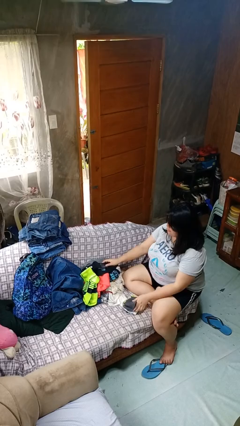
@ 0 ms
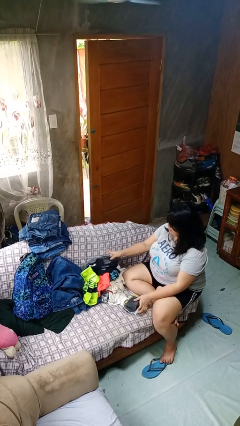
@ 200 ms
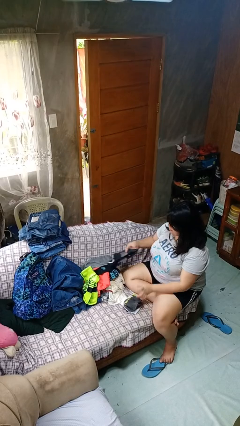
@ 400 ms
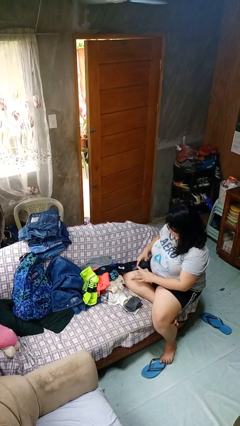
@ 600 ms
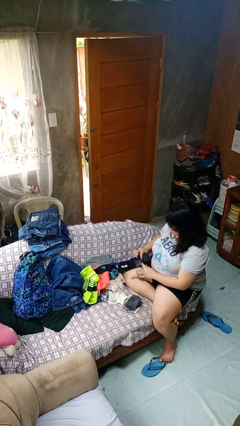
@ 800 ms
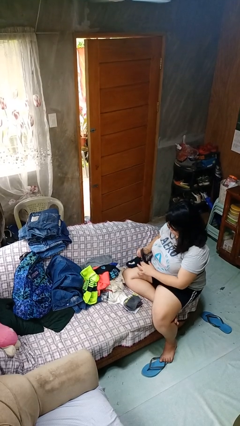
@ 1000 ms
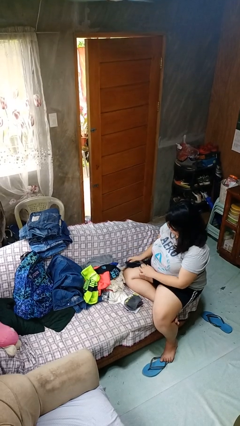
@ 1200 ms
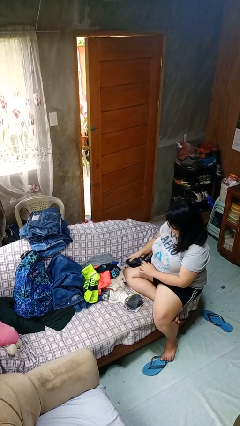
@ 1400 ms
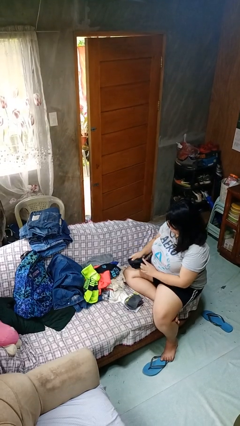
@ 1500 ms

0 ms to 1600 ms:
person folds socks

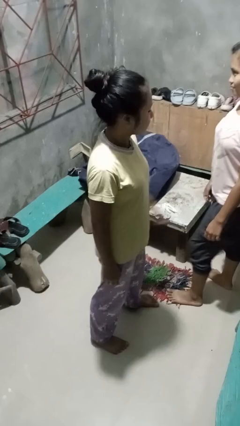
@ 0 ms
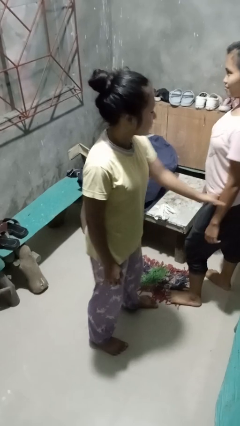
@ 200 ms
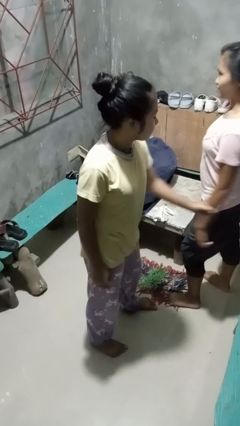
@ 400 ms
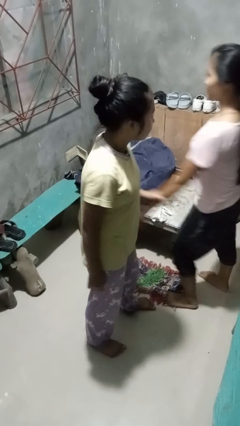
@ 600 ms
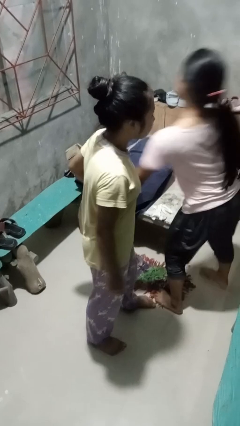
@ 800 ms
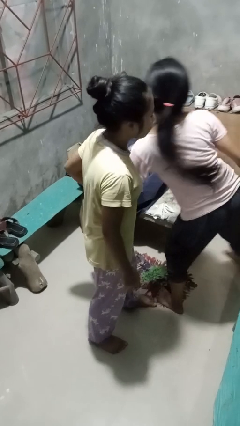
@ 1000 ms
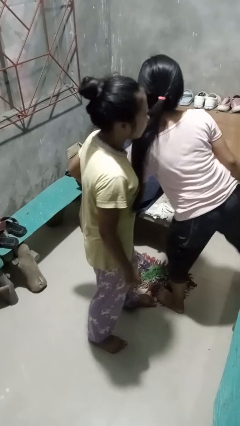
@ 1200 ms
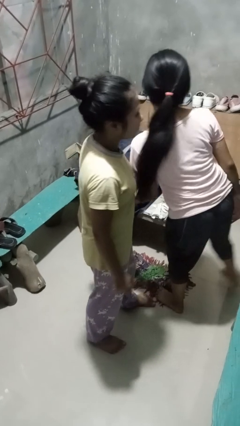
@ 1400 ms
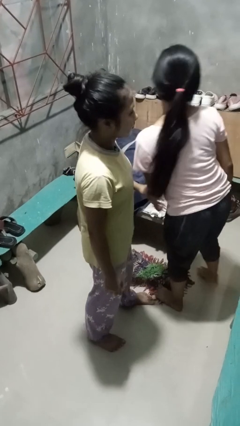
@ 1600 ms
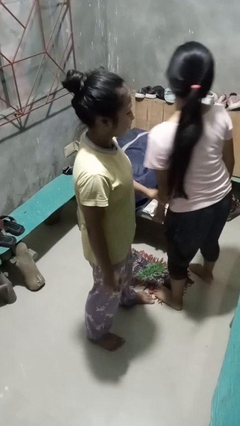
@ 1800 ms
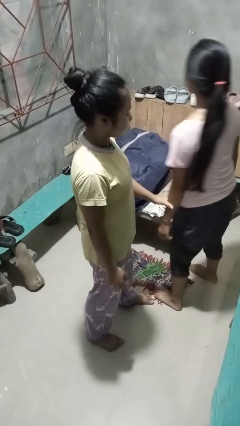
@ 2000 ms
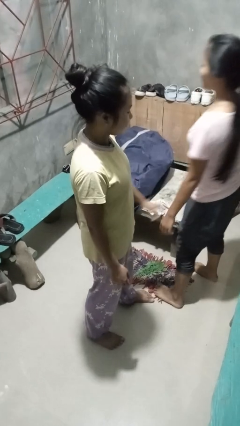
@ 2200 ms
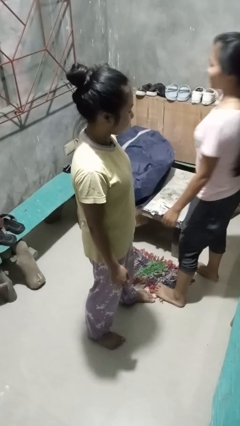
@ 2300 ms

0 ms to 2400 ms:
person grabs person by forearm

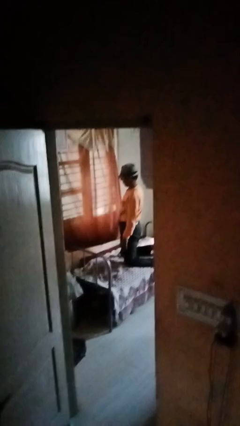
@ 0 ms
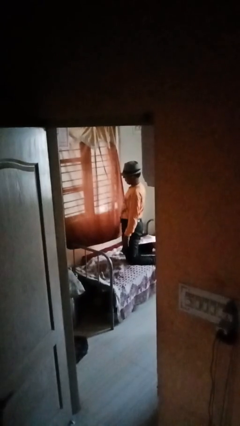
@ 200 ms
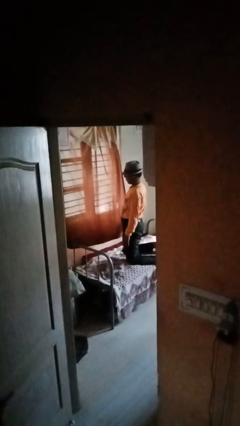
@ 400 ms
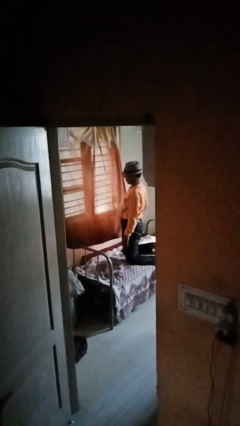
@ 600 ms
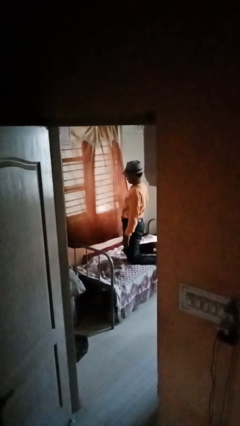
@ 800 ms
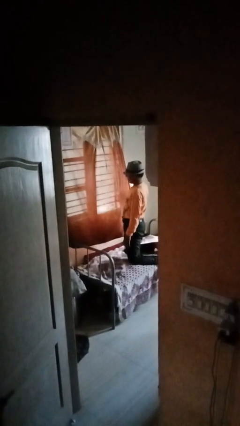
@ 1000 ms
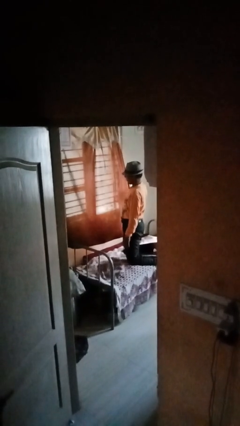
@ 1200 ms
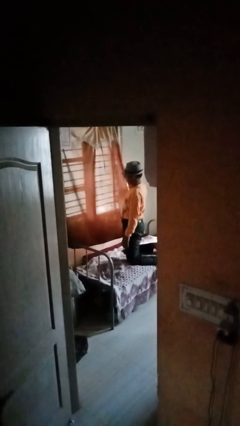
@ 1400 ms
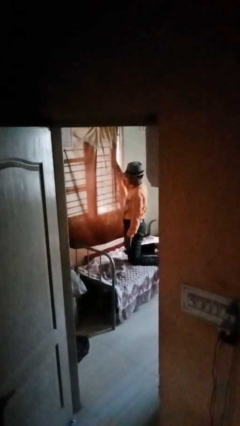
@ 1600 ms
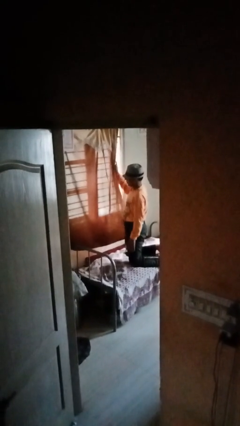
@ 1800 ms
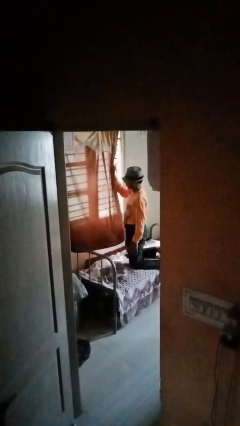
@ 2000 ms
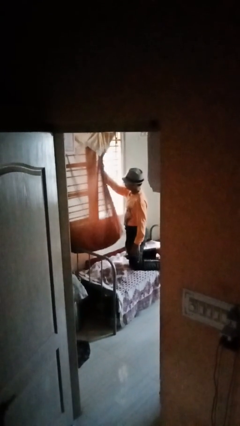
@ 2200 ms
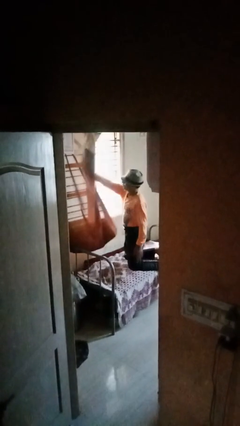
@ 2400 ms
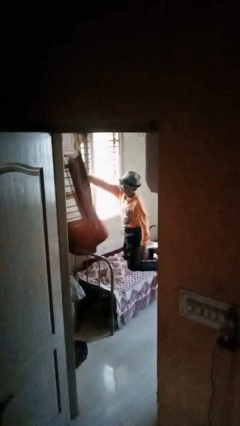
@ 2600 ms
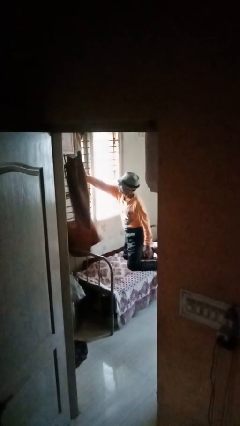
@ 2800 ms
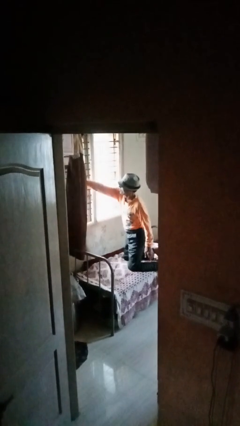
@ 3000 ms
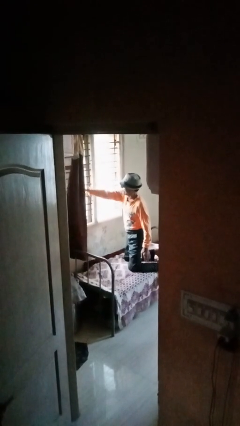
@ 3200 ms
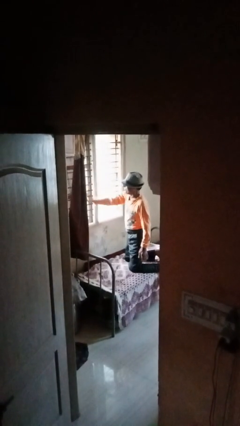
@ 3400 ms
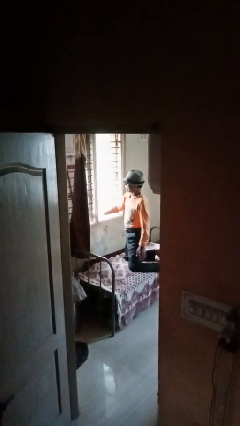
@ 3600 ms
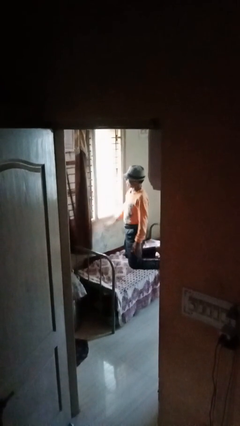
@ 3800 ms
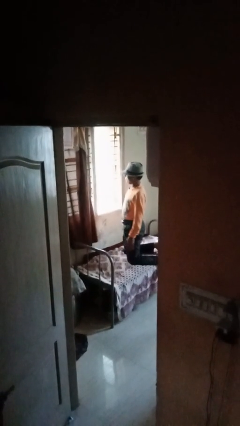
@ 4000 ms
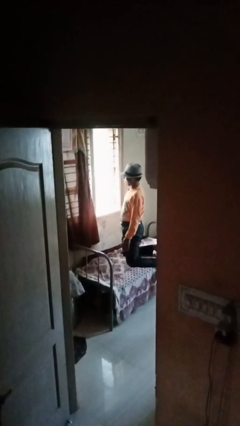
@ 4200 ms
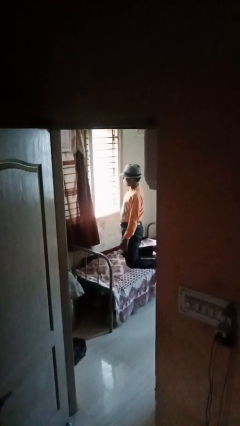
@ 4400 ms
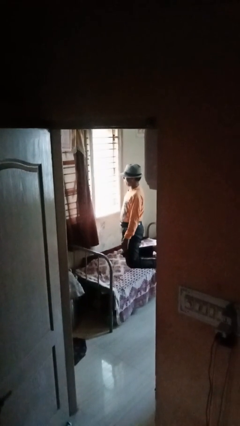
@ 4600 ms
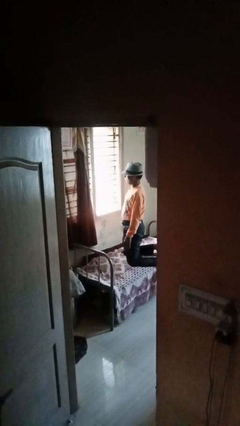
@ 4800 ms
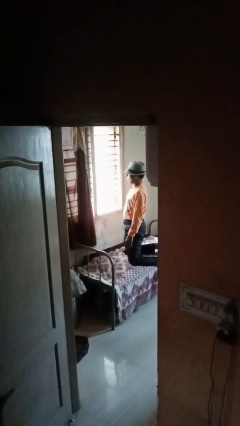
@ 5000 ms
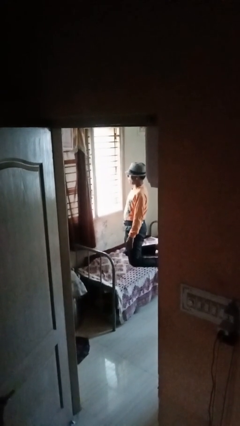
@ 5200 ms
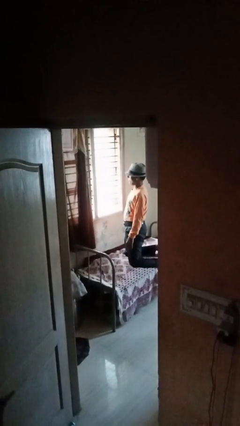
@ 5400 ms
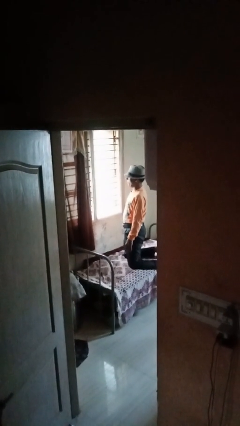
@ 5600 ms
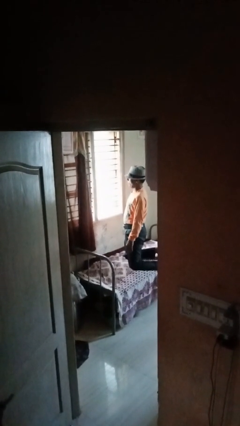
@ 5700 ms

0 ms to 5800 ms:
person opens curtains

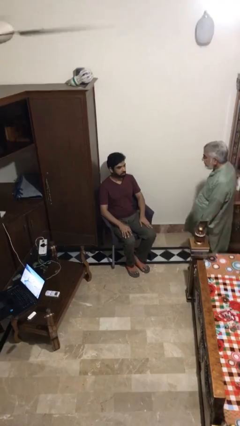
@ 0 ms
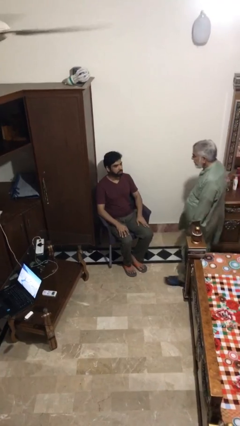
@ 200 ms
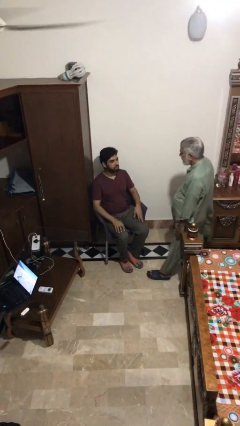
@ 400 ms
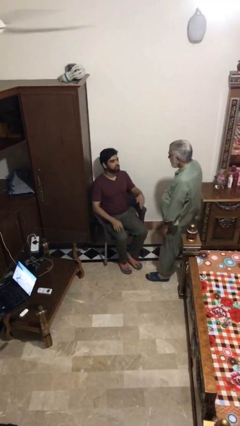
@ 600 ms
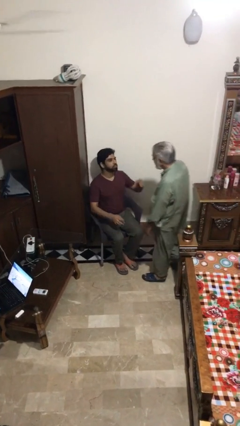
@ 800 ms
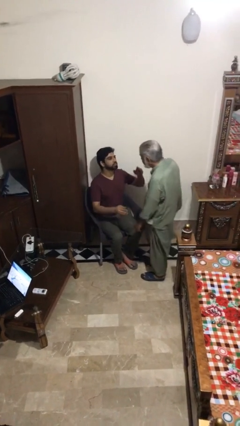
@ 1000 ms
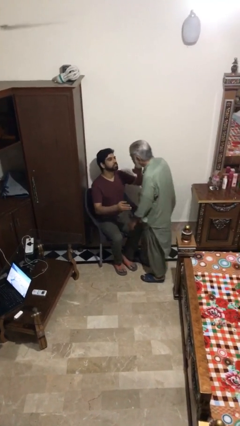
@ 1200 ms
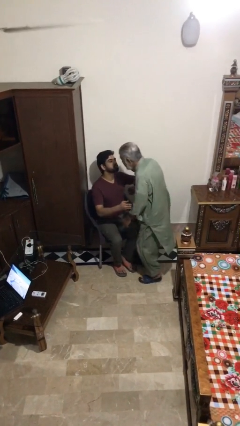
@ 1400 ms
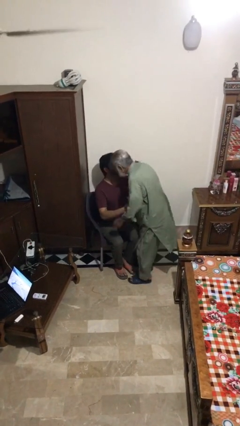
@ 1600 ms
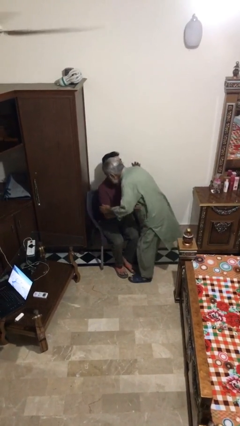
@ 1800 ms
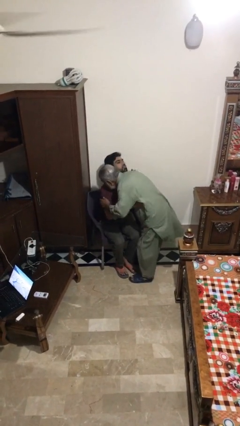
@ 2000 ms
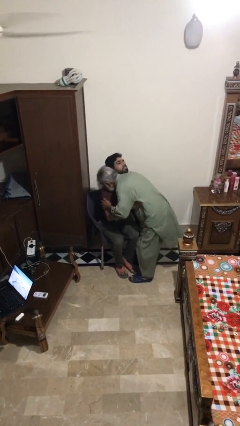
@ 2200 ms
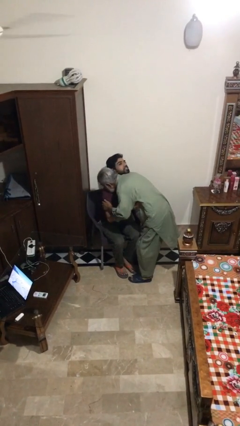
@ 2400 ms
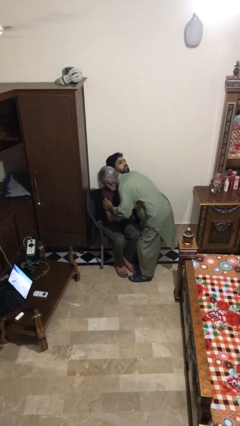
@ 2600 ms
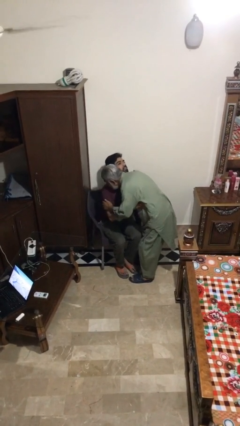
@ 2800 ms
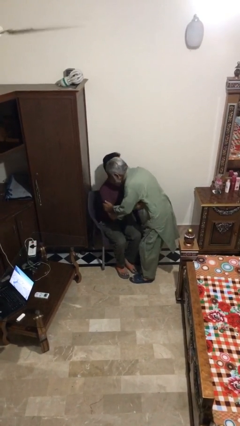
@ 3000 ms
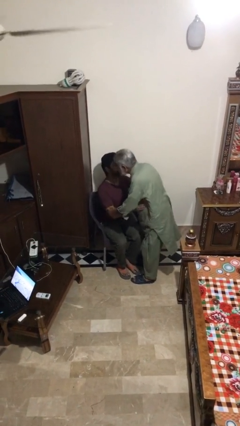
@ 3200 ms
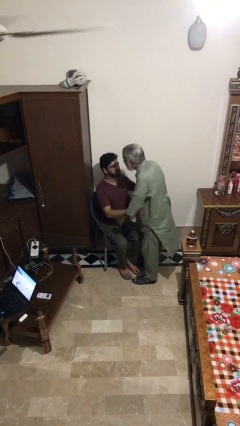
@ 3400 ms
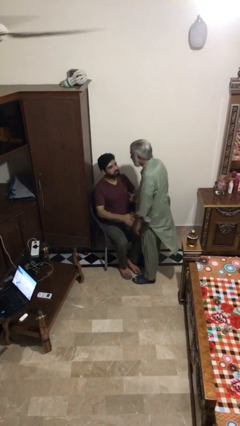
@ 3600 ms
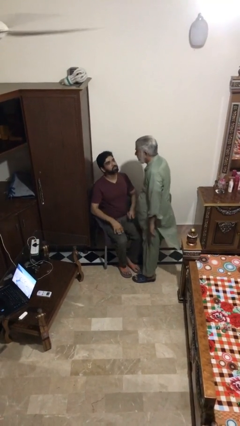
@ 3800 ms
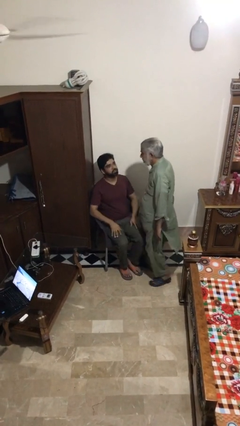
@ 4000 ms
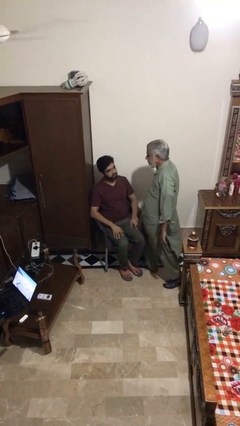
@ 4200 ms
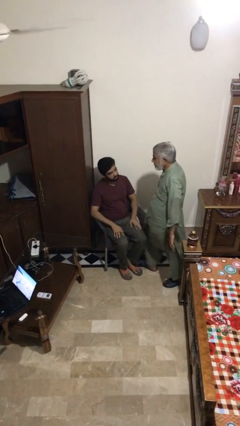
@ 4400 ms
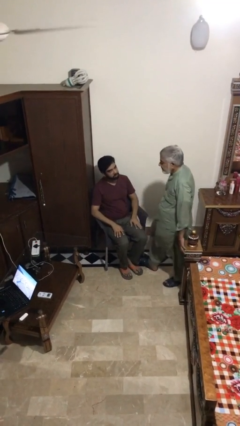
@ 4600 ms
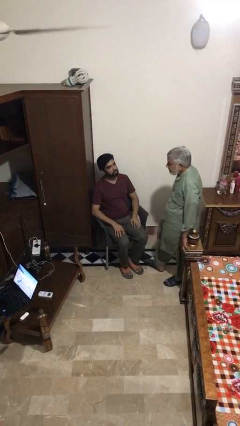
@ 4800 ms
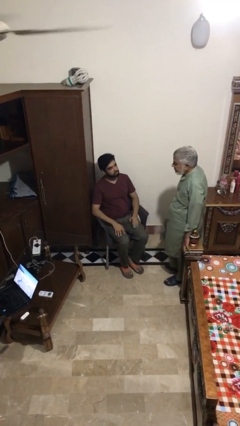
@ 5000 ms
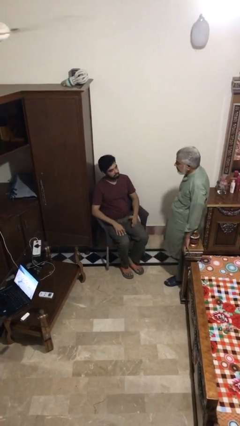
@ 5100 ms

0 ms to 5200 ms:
person embraces person

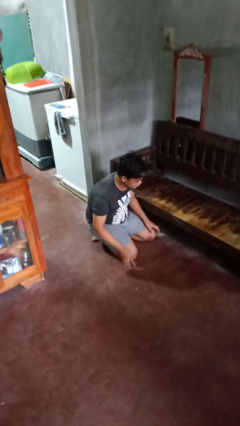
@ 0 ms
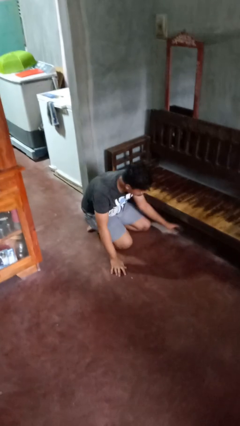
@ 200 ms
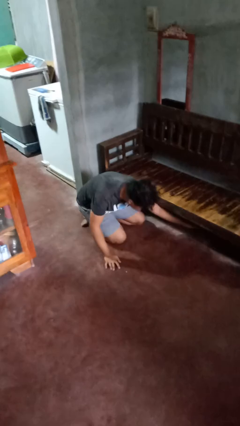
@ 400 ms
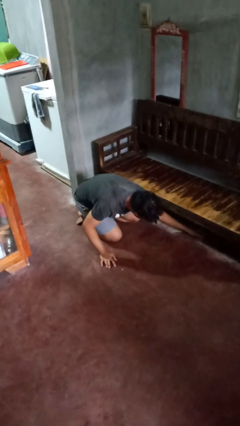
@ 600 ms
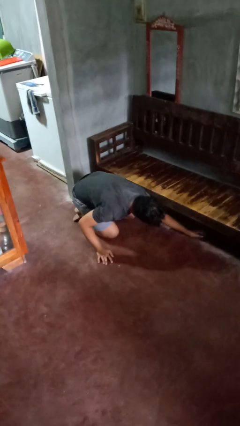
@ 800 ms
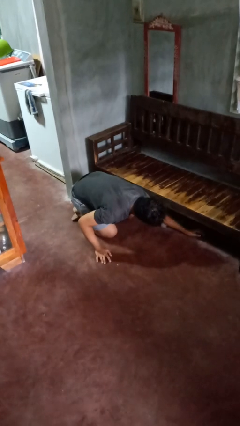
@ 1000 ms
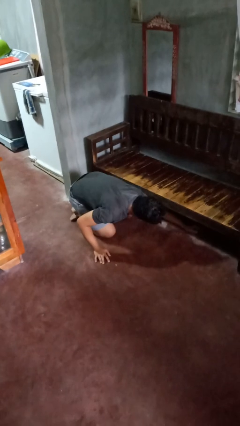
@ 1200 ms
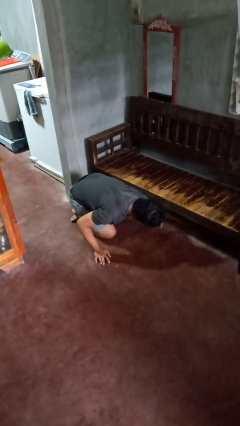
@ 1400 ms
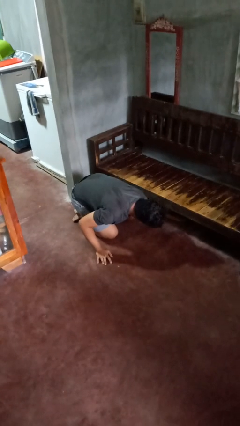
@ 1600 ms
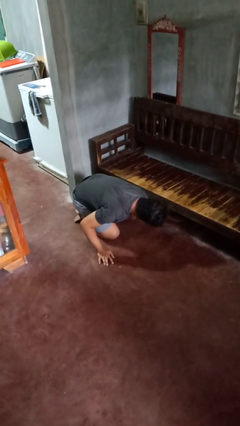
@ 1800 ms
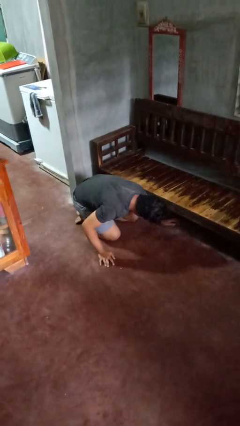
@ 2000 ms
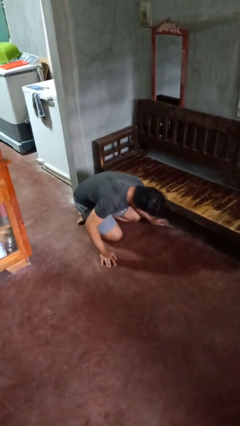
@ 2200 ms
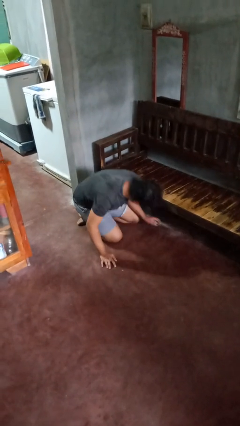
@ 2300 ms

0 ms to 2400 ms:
person searches under couch

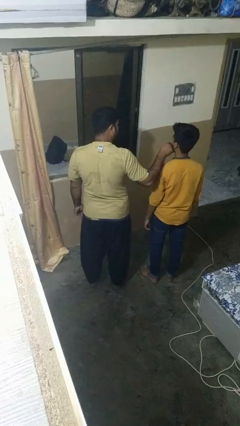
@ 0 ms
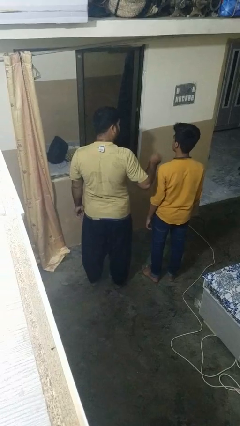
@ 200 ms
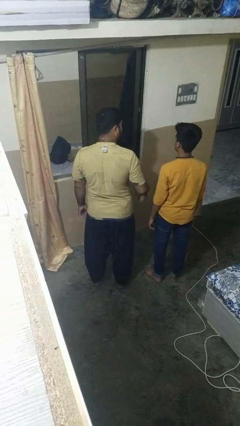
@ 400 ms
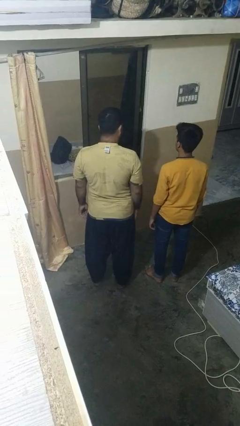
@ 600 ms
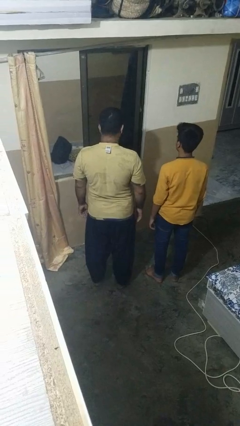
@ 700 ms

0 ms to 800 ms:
person touches face of person
